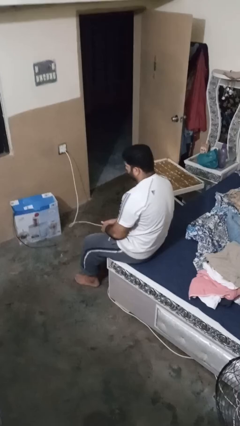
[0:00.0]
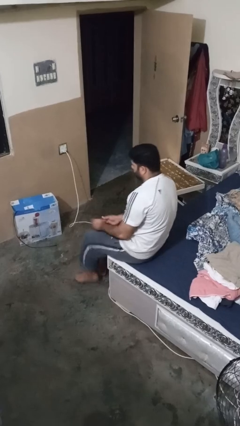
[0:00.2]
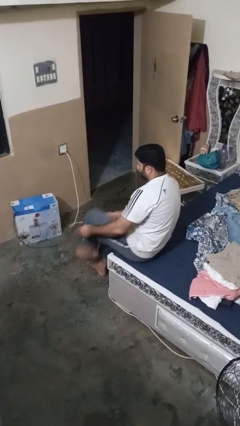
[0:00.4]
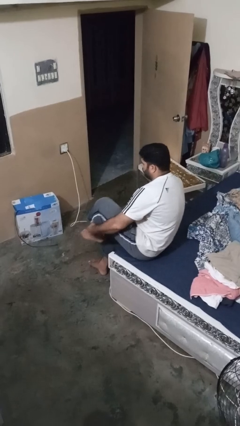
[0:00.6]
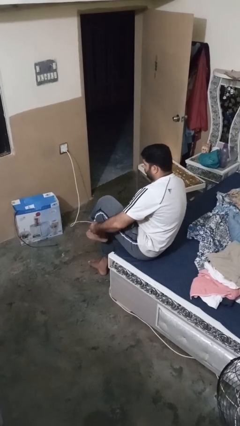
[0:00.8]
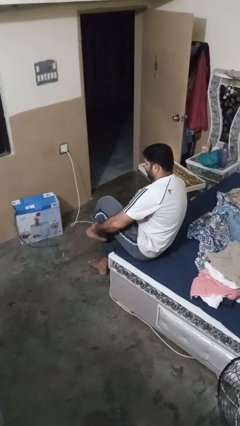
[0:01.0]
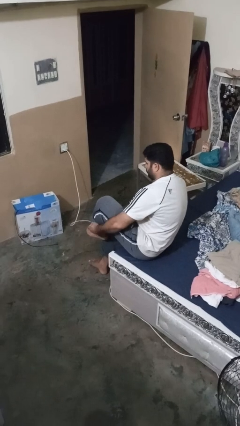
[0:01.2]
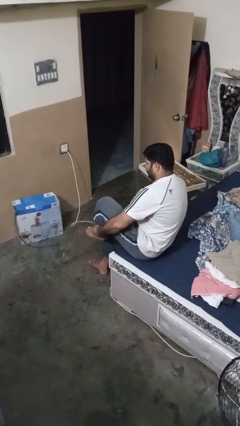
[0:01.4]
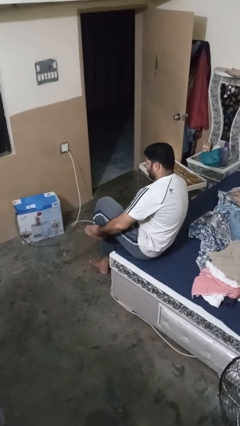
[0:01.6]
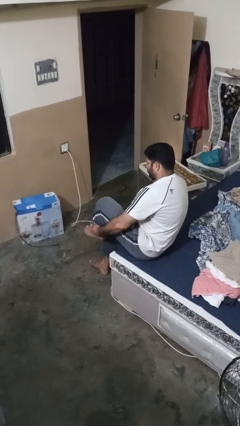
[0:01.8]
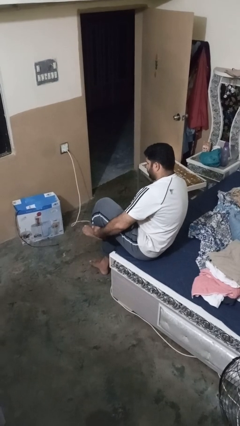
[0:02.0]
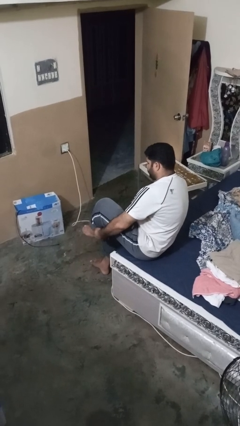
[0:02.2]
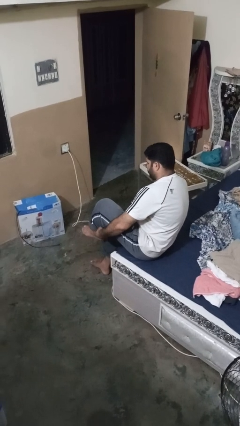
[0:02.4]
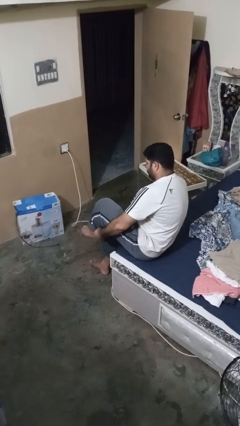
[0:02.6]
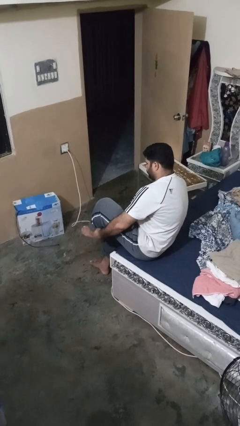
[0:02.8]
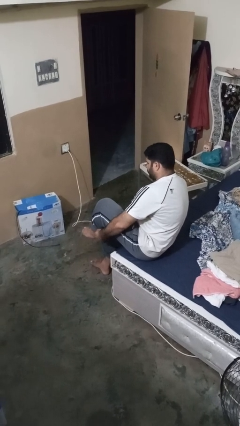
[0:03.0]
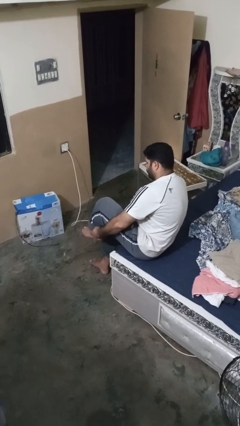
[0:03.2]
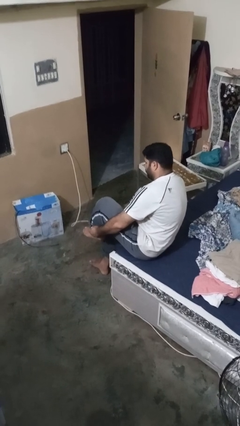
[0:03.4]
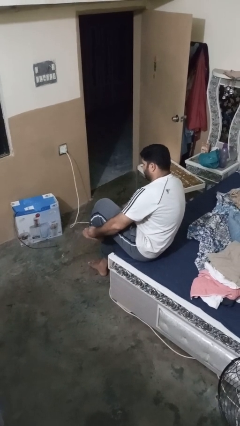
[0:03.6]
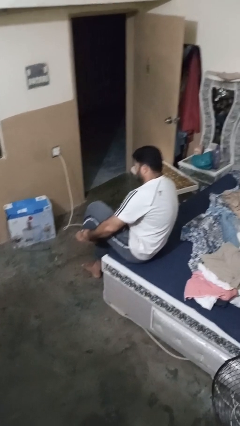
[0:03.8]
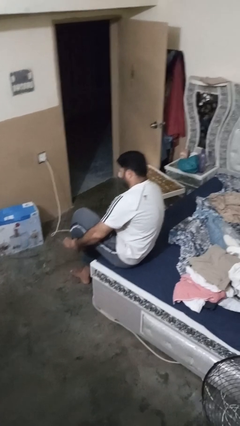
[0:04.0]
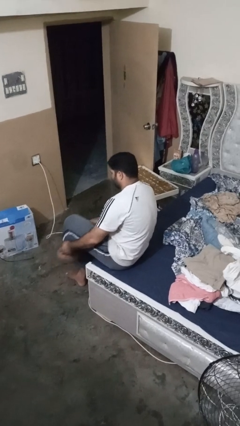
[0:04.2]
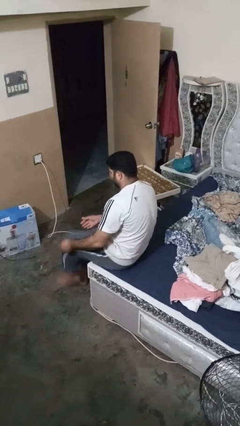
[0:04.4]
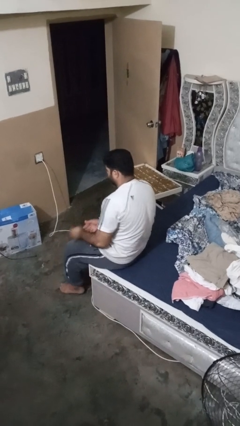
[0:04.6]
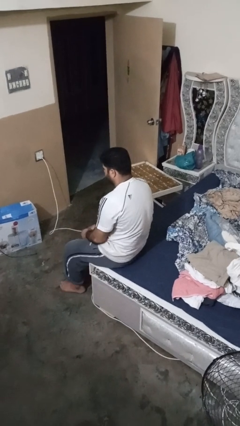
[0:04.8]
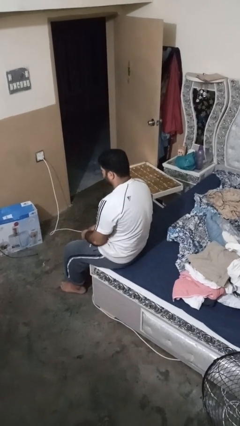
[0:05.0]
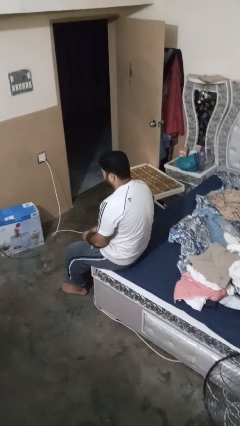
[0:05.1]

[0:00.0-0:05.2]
person hikes up pants

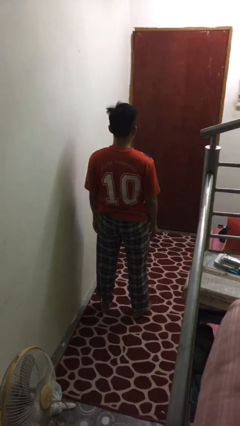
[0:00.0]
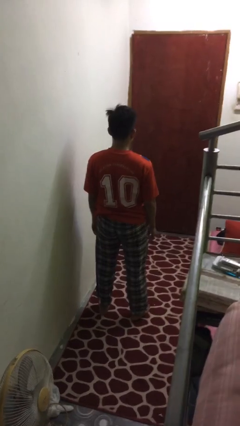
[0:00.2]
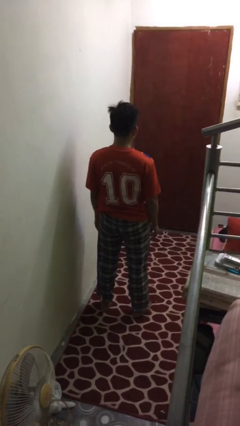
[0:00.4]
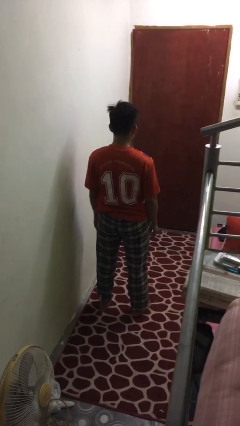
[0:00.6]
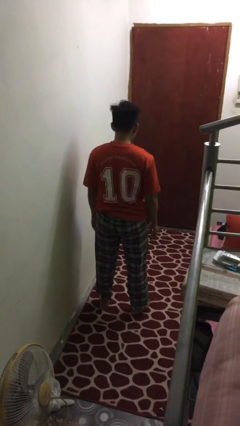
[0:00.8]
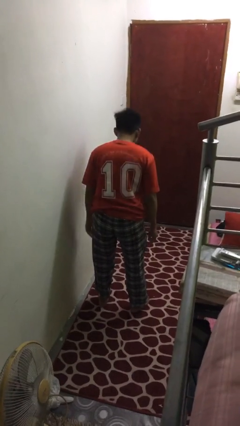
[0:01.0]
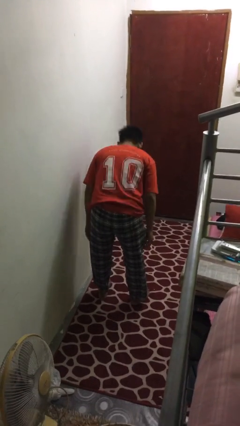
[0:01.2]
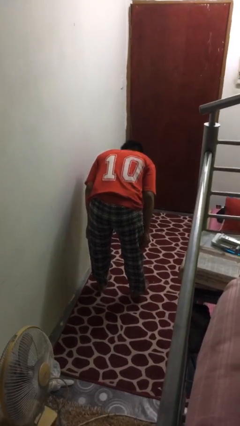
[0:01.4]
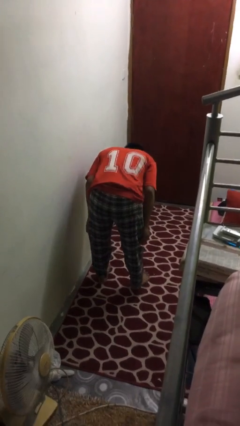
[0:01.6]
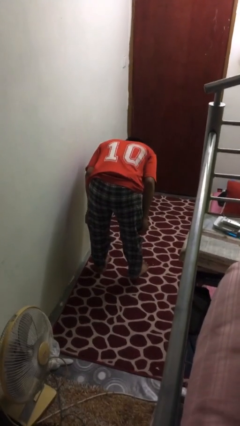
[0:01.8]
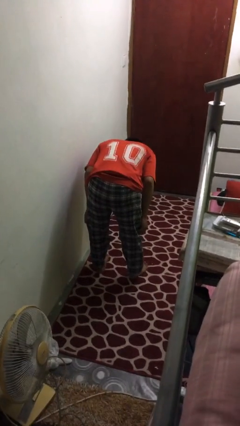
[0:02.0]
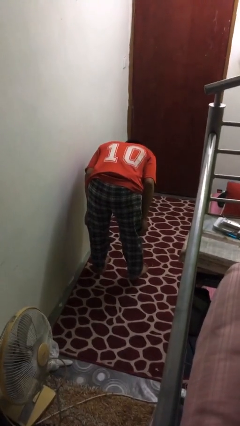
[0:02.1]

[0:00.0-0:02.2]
person bows

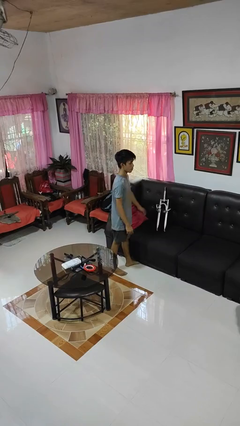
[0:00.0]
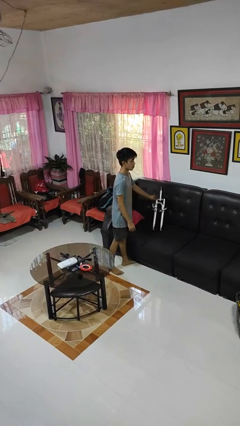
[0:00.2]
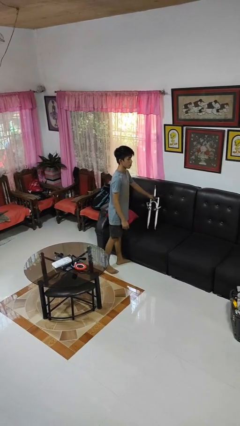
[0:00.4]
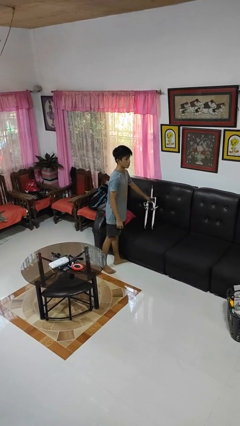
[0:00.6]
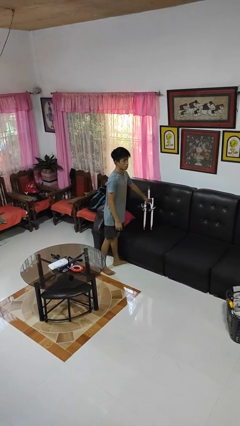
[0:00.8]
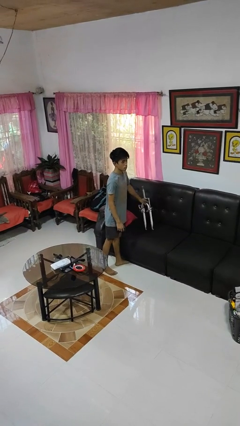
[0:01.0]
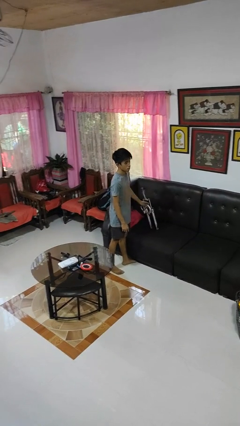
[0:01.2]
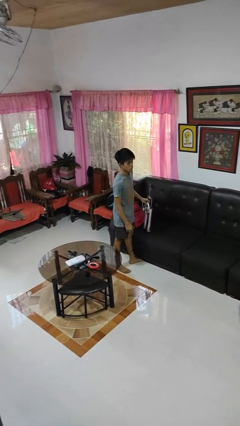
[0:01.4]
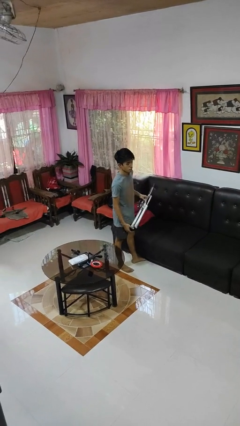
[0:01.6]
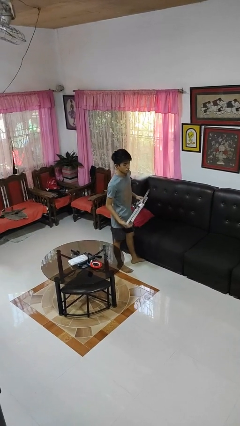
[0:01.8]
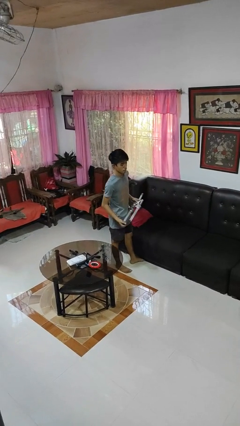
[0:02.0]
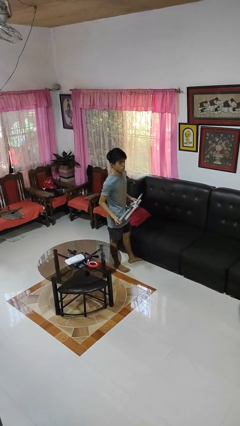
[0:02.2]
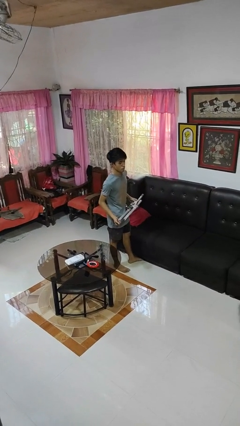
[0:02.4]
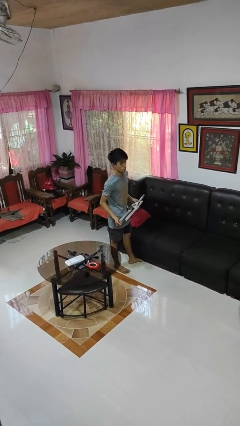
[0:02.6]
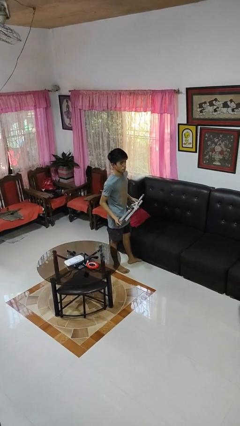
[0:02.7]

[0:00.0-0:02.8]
person picks up object from couch

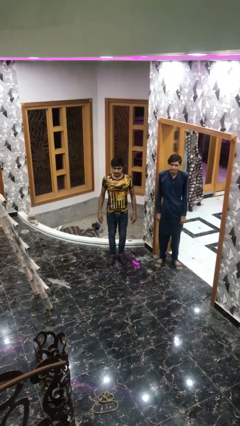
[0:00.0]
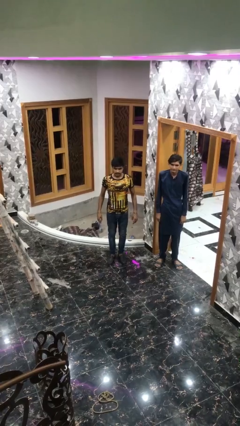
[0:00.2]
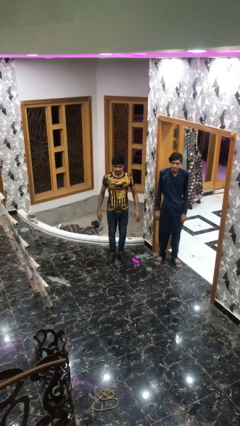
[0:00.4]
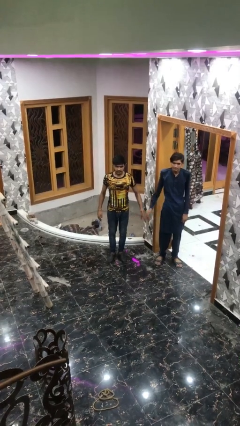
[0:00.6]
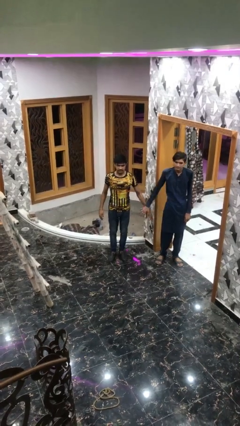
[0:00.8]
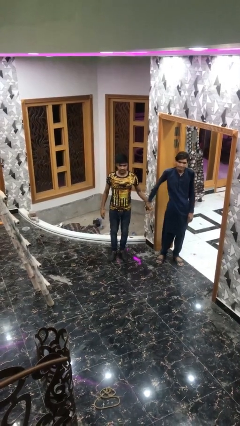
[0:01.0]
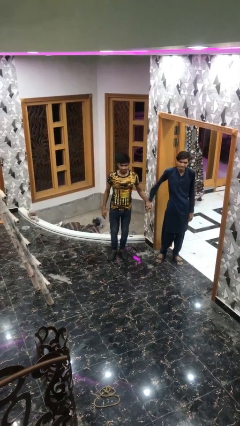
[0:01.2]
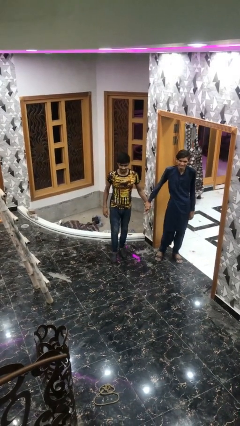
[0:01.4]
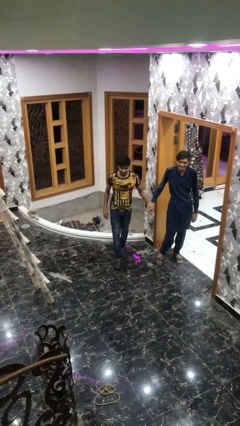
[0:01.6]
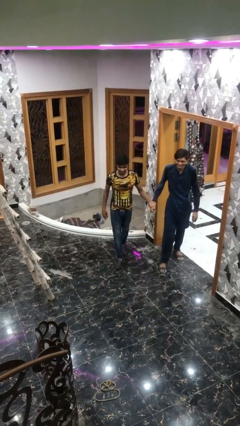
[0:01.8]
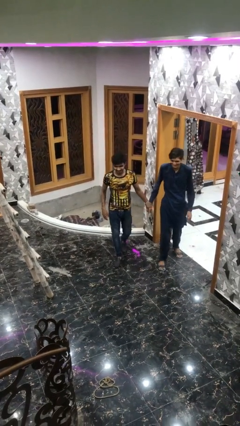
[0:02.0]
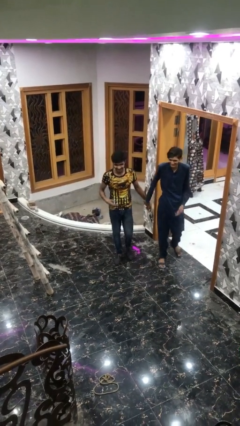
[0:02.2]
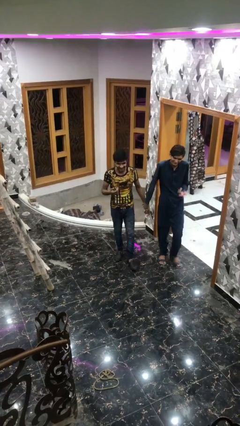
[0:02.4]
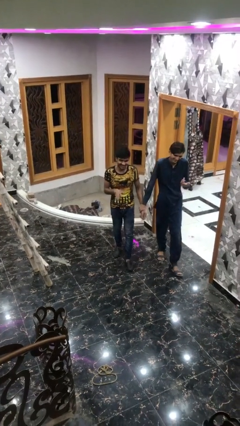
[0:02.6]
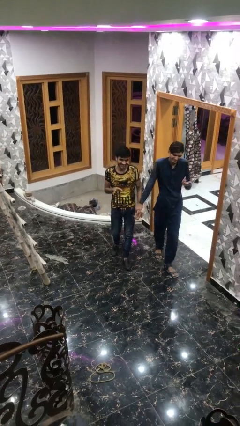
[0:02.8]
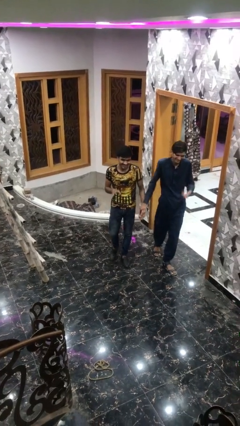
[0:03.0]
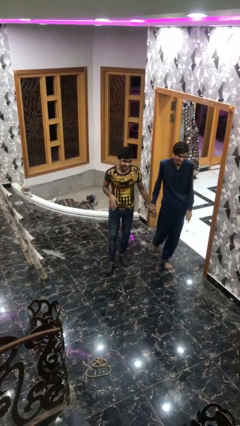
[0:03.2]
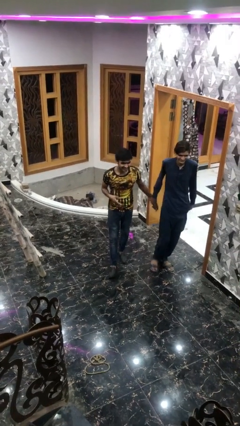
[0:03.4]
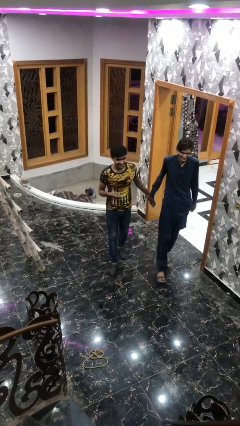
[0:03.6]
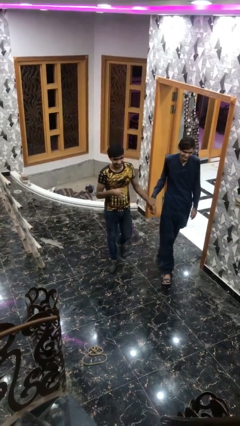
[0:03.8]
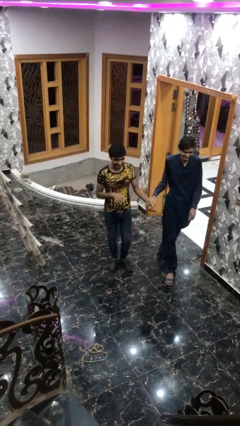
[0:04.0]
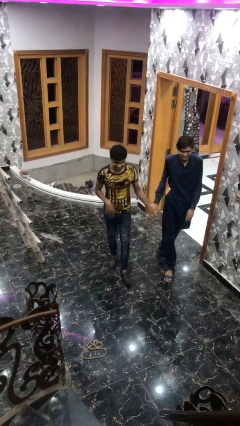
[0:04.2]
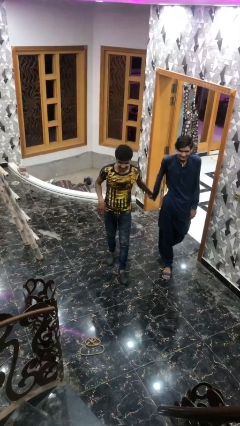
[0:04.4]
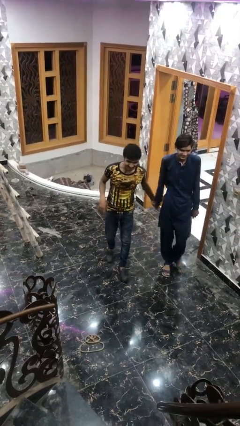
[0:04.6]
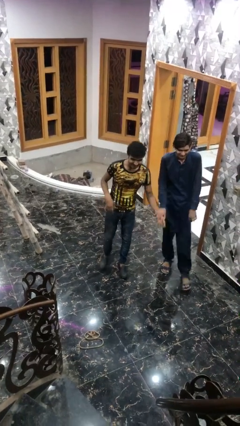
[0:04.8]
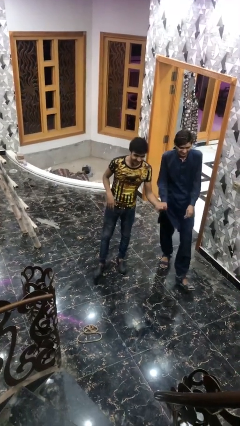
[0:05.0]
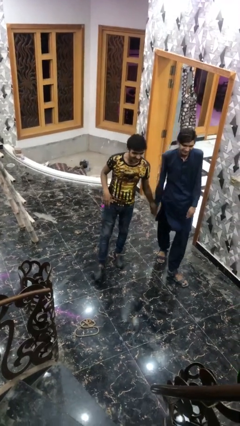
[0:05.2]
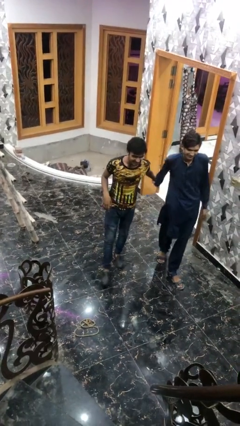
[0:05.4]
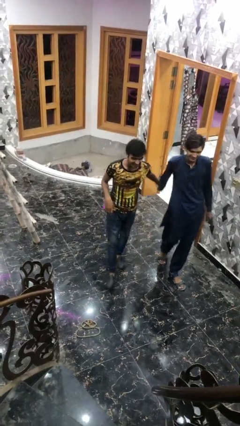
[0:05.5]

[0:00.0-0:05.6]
person holds hand

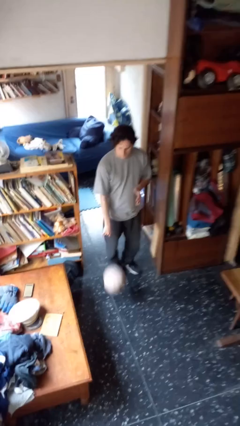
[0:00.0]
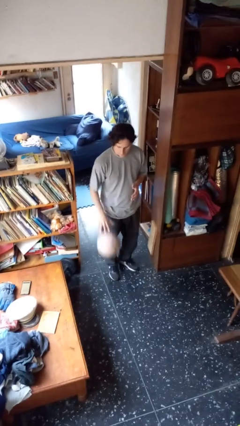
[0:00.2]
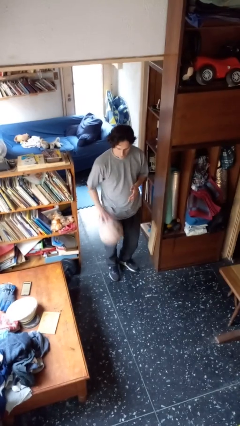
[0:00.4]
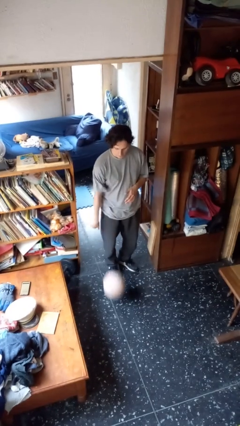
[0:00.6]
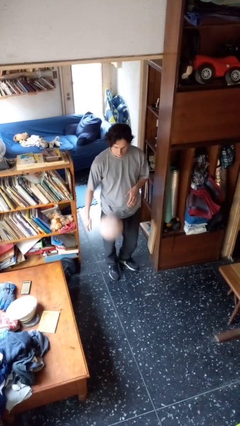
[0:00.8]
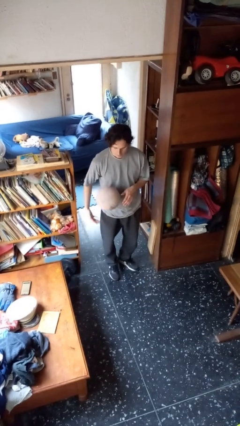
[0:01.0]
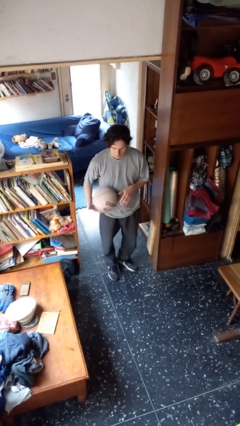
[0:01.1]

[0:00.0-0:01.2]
person bounces ball on floor

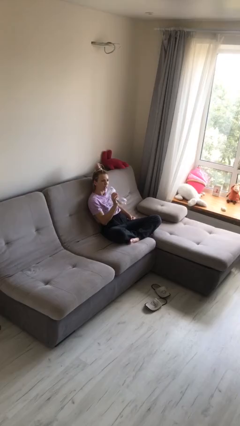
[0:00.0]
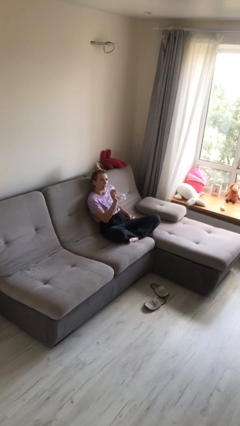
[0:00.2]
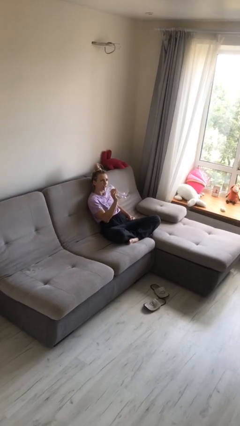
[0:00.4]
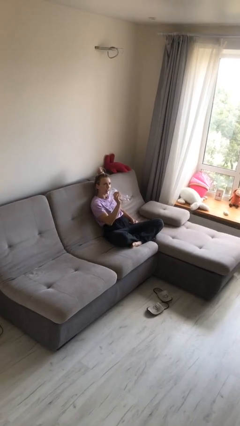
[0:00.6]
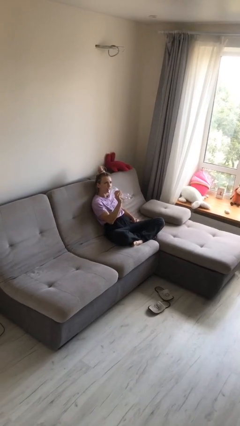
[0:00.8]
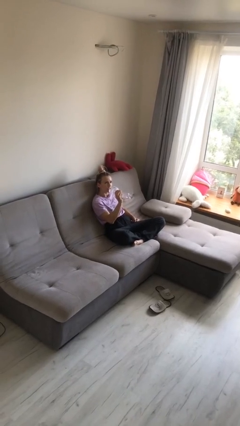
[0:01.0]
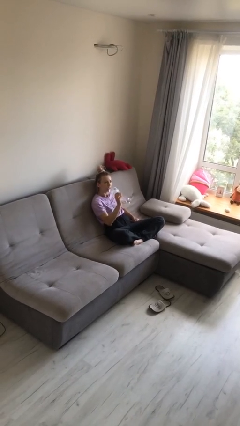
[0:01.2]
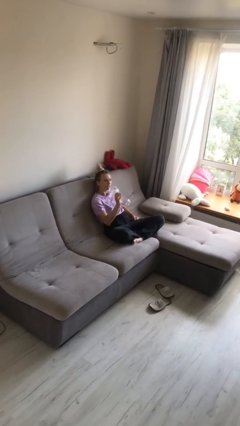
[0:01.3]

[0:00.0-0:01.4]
person drinks from bottle
